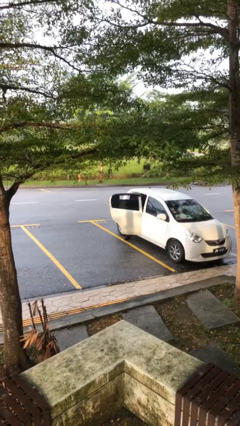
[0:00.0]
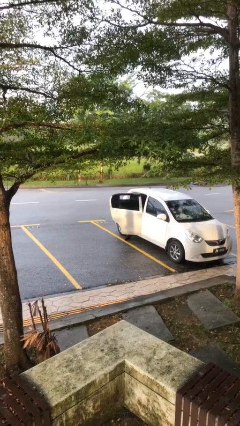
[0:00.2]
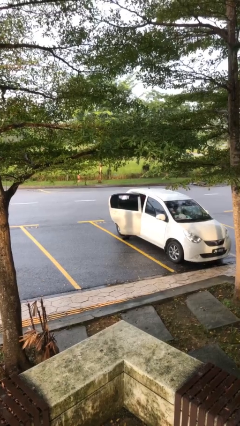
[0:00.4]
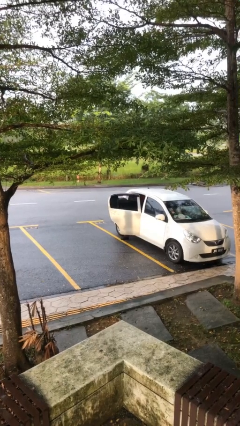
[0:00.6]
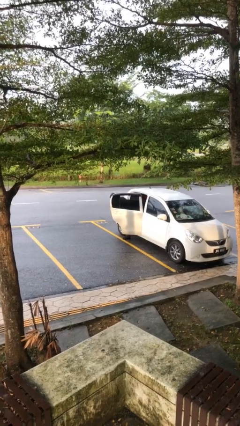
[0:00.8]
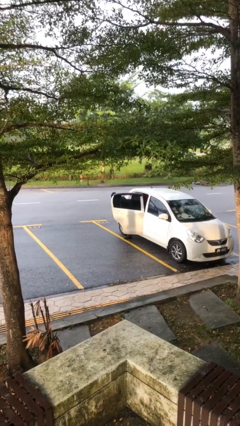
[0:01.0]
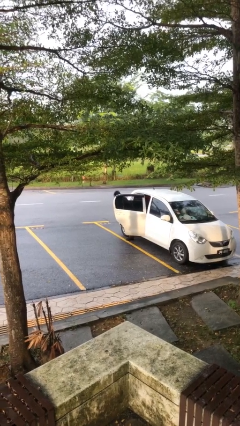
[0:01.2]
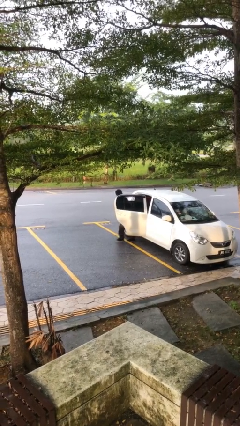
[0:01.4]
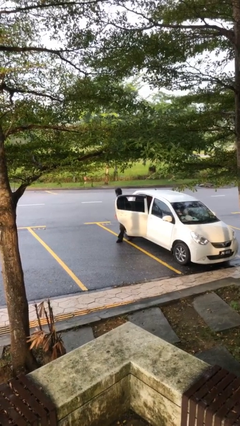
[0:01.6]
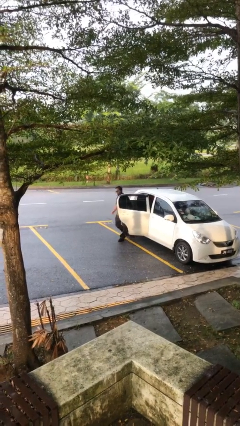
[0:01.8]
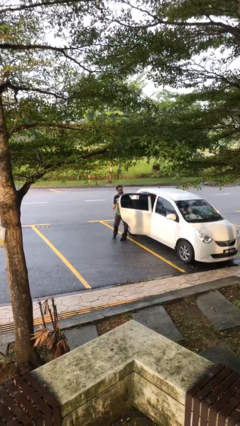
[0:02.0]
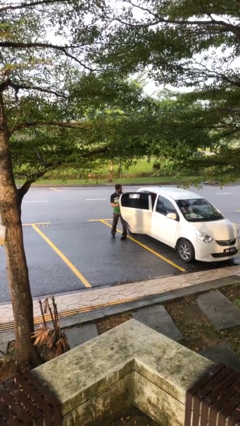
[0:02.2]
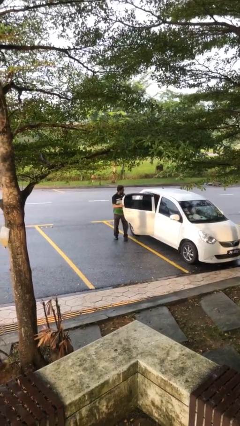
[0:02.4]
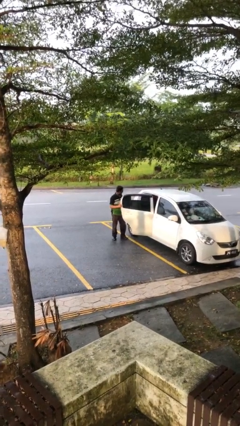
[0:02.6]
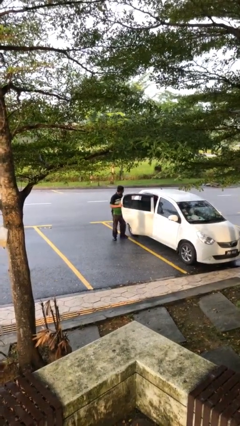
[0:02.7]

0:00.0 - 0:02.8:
person exits car

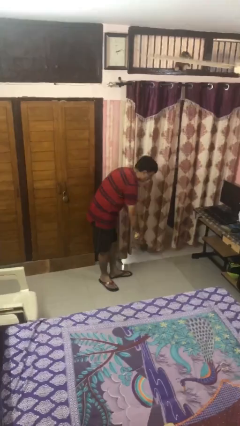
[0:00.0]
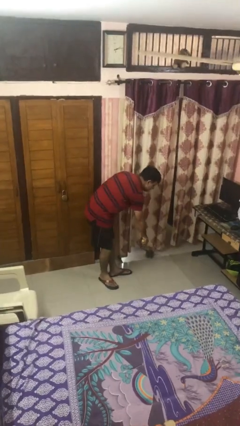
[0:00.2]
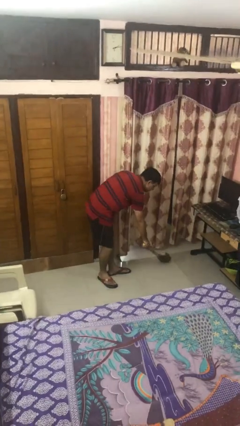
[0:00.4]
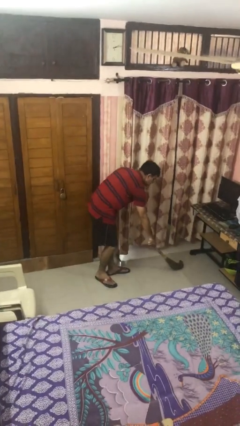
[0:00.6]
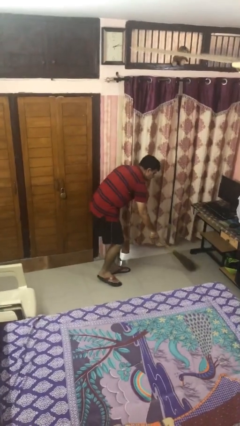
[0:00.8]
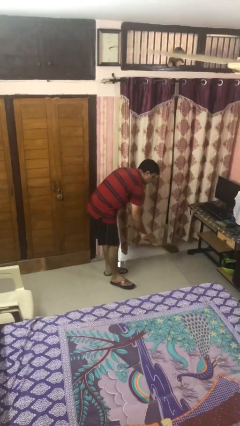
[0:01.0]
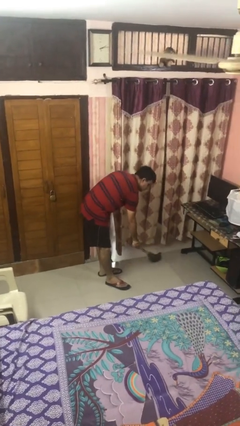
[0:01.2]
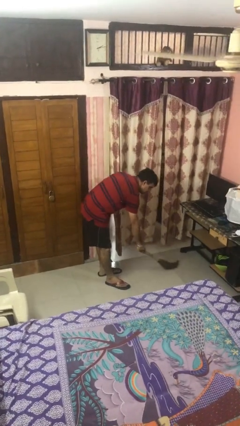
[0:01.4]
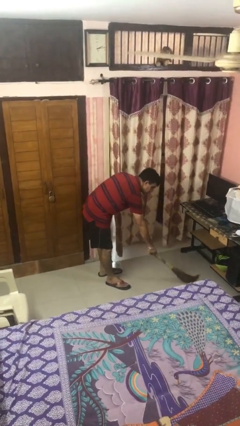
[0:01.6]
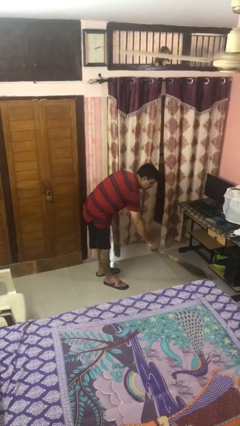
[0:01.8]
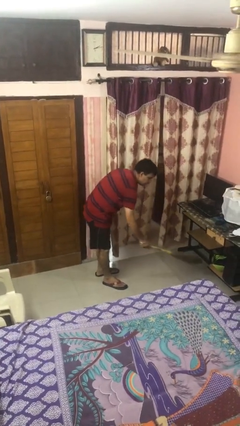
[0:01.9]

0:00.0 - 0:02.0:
person sweeps floor

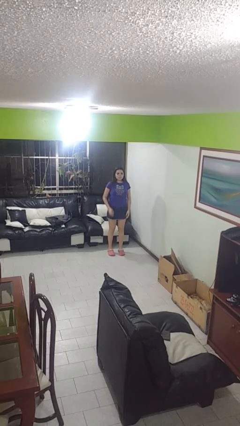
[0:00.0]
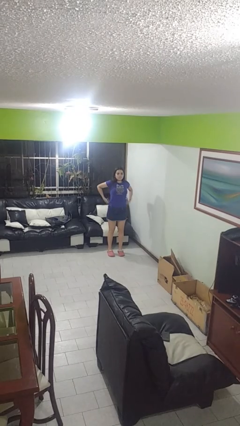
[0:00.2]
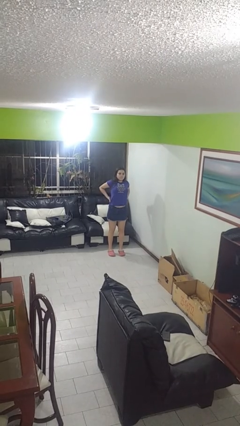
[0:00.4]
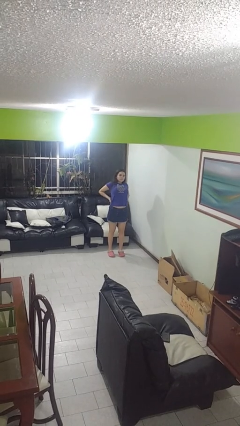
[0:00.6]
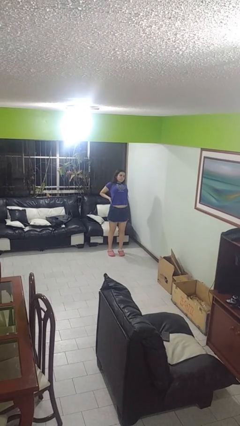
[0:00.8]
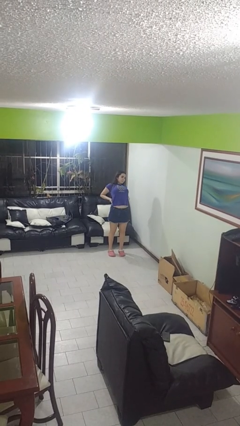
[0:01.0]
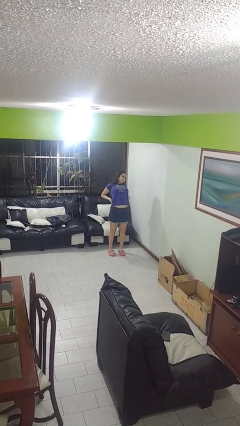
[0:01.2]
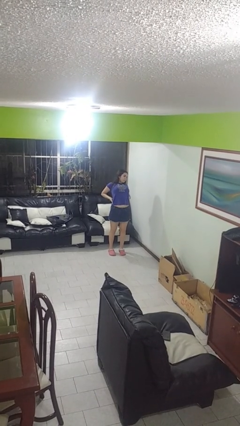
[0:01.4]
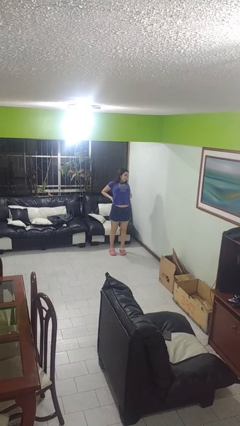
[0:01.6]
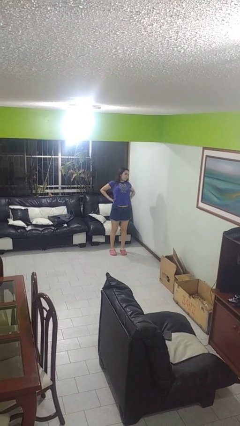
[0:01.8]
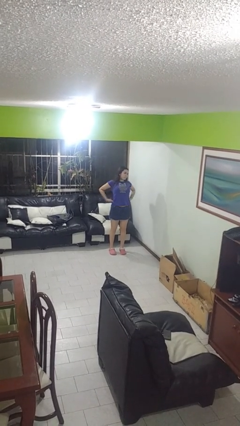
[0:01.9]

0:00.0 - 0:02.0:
person stretches back

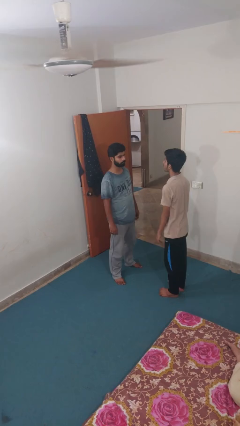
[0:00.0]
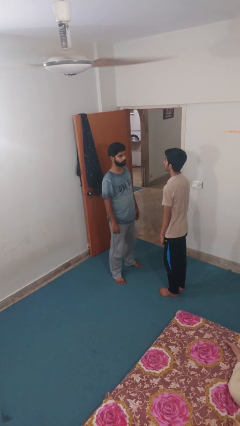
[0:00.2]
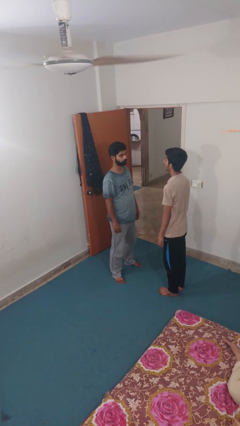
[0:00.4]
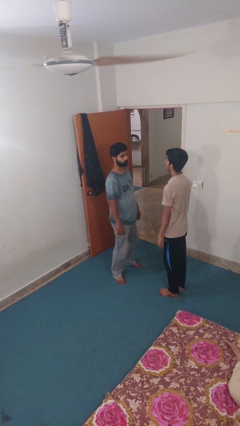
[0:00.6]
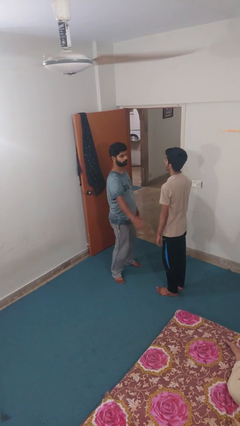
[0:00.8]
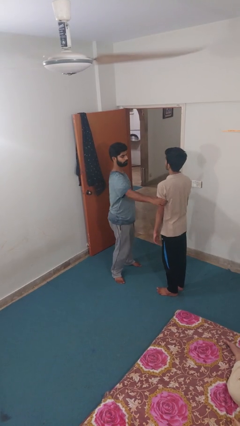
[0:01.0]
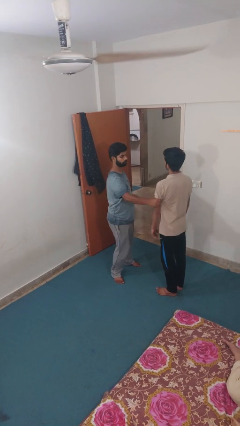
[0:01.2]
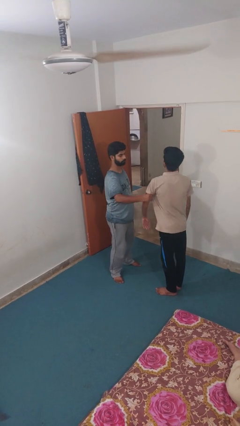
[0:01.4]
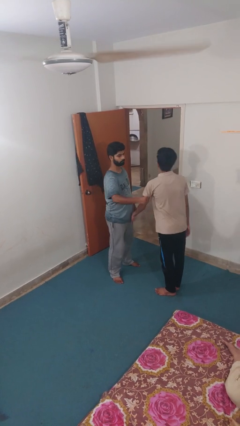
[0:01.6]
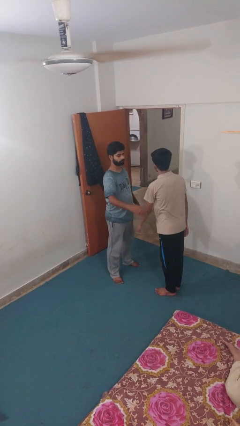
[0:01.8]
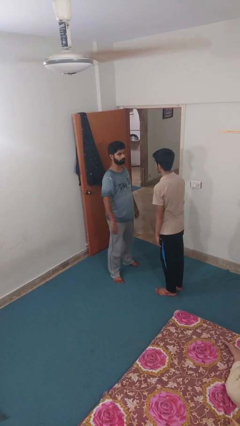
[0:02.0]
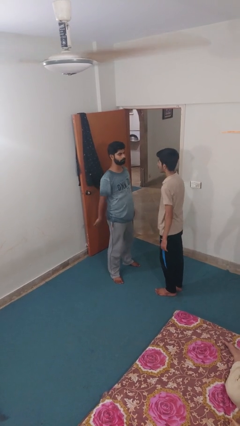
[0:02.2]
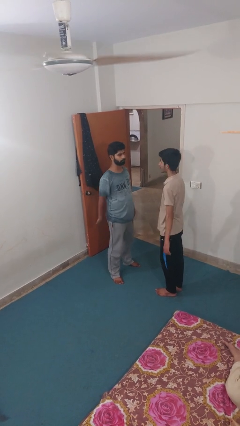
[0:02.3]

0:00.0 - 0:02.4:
person grabs person by bicep

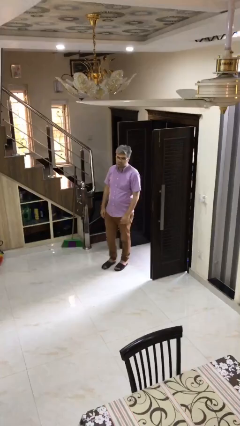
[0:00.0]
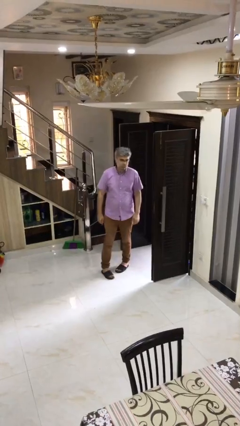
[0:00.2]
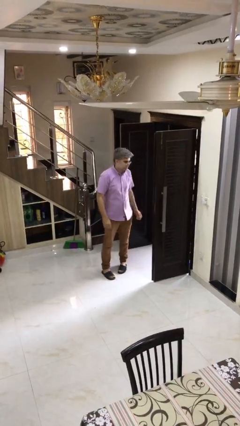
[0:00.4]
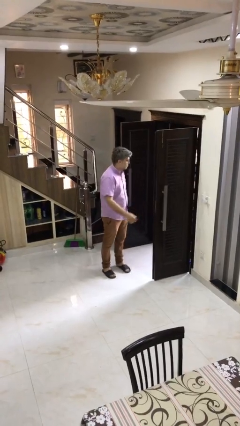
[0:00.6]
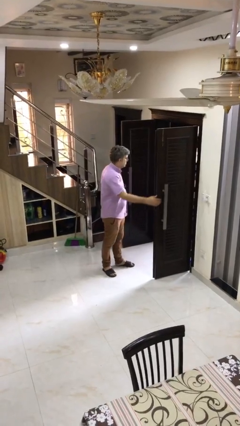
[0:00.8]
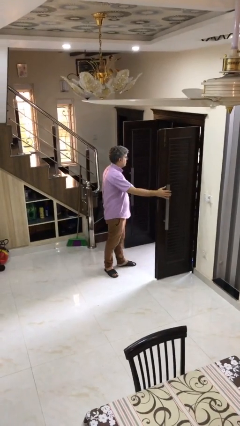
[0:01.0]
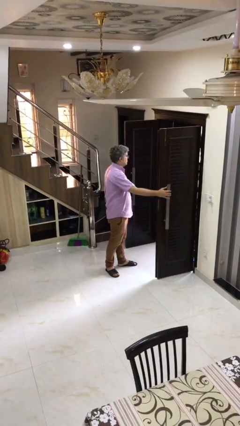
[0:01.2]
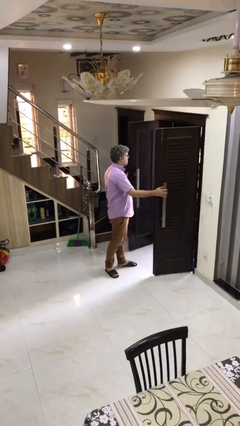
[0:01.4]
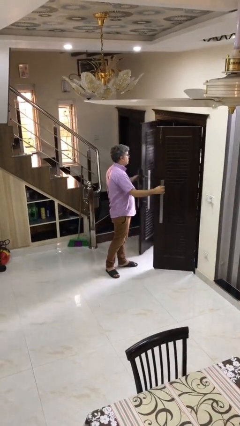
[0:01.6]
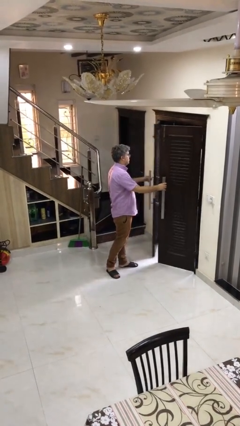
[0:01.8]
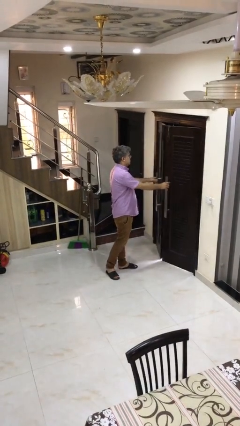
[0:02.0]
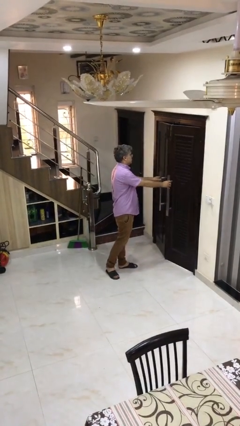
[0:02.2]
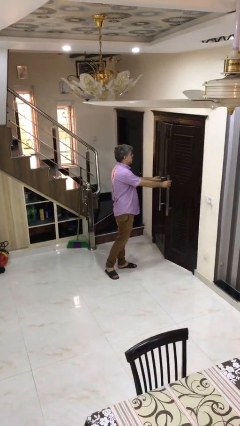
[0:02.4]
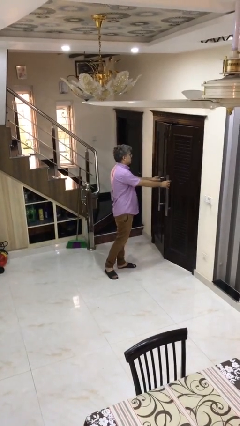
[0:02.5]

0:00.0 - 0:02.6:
person closes facility door

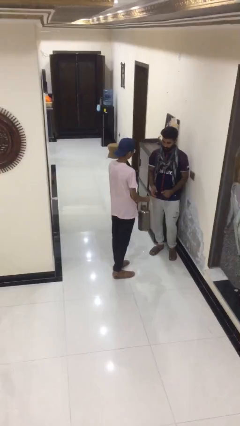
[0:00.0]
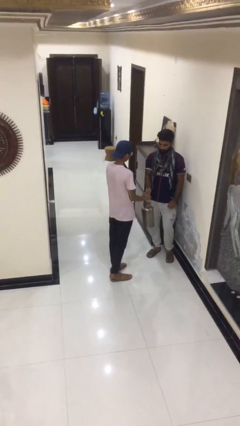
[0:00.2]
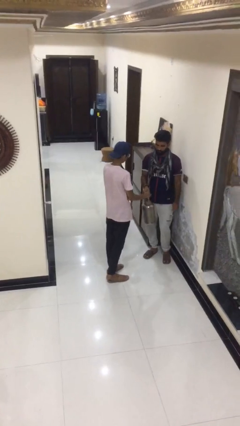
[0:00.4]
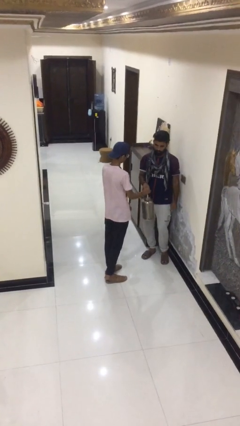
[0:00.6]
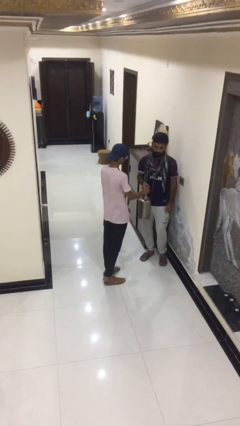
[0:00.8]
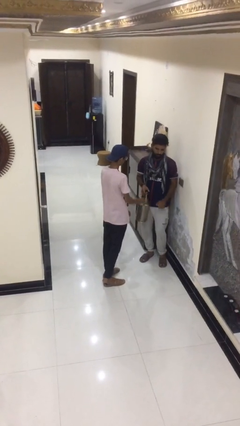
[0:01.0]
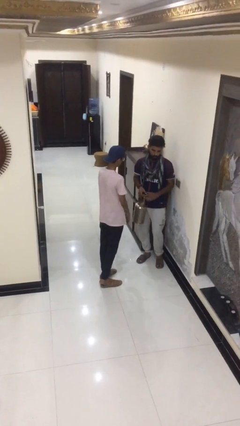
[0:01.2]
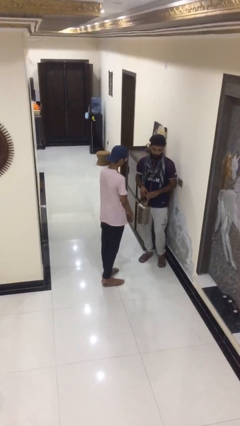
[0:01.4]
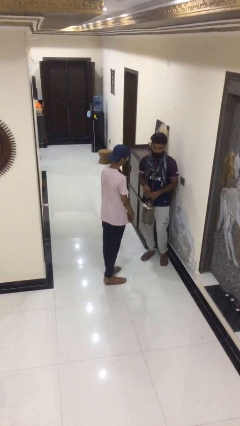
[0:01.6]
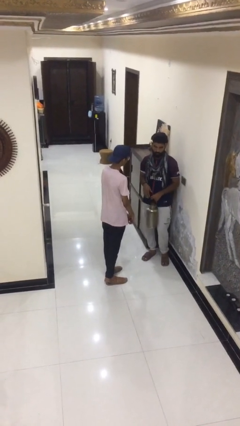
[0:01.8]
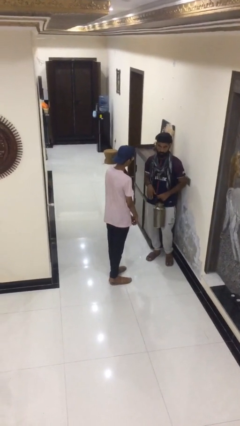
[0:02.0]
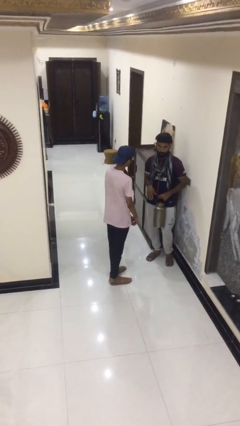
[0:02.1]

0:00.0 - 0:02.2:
person transfers object to person

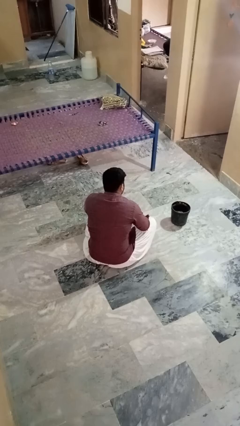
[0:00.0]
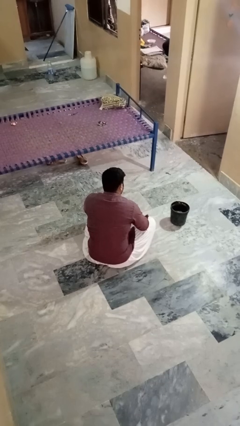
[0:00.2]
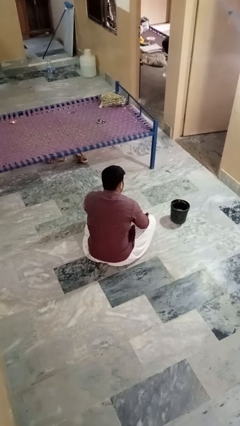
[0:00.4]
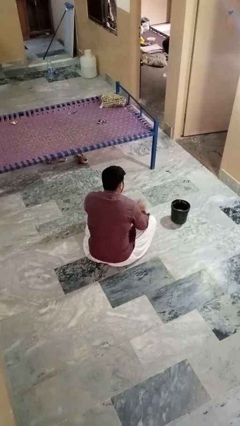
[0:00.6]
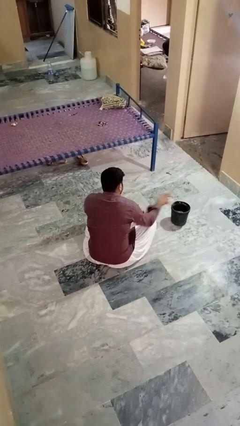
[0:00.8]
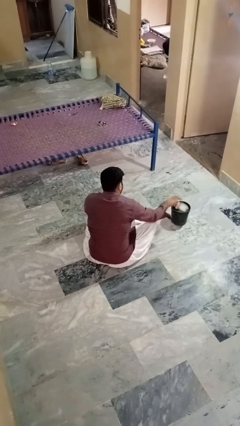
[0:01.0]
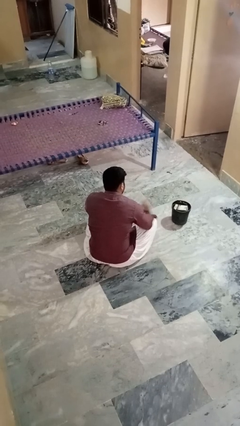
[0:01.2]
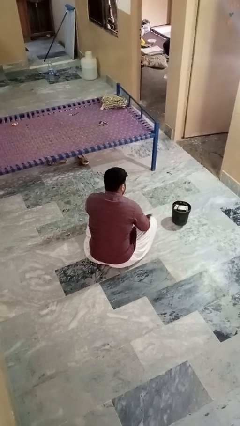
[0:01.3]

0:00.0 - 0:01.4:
person puts object into basket

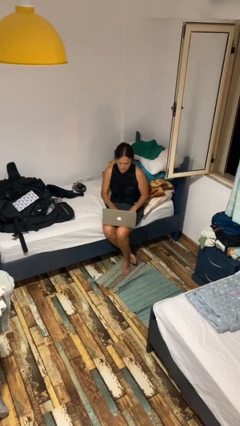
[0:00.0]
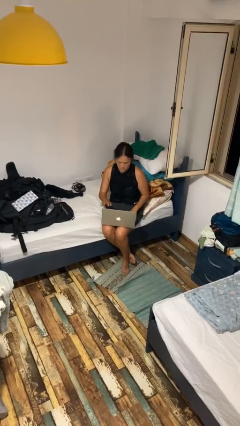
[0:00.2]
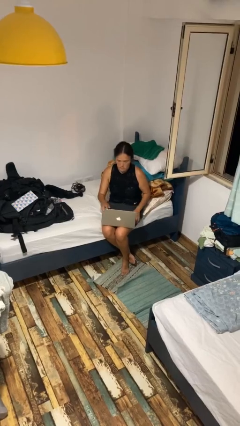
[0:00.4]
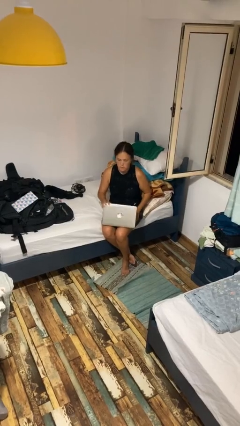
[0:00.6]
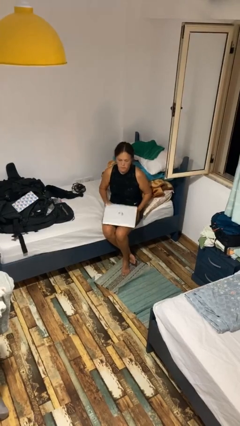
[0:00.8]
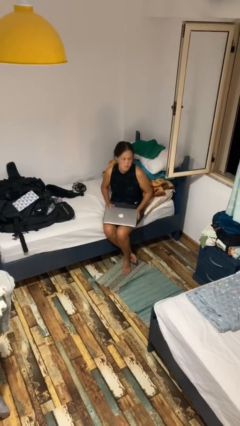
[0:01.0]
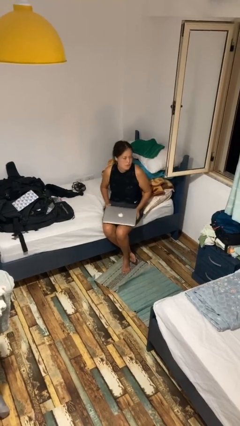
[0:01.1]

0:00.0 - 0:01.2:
person closes laptop
